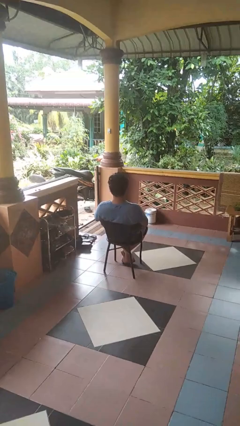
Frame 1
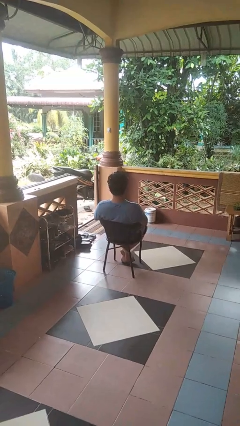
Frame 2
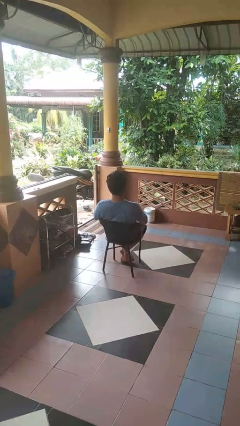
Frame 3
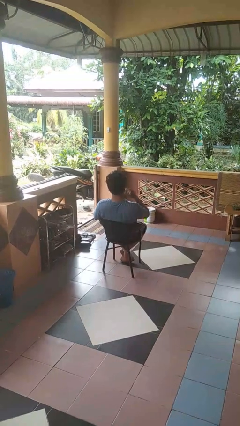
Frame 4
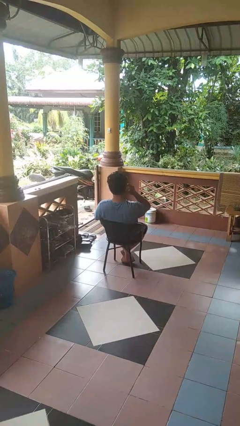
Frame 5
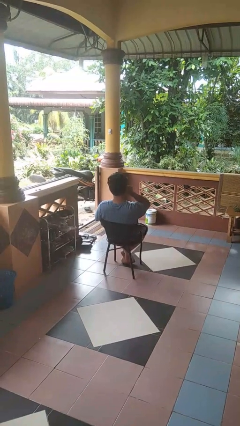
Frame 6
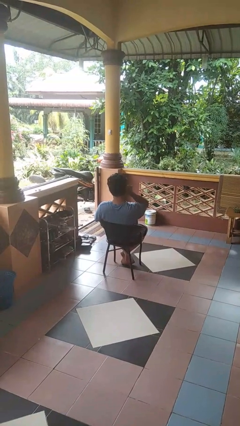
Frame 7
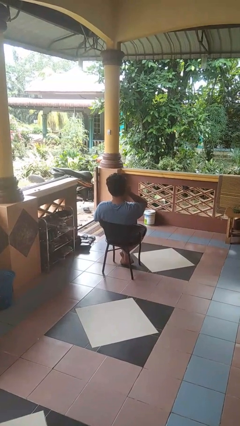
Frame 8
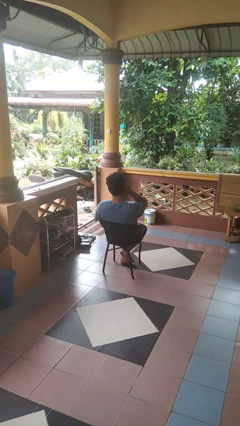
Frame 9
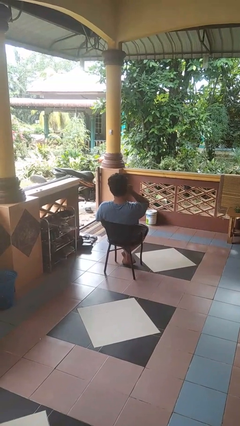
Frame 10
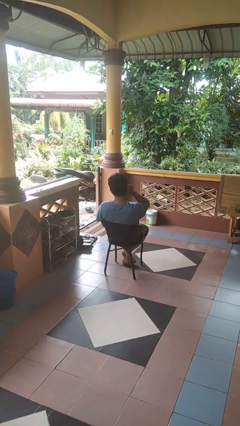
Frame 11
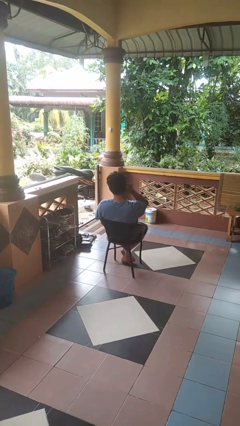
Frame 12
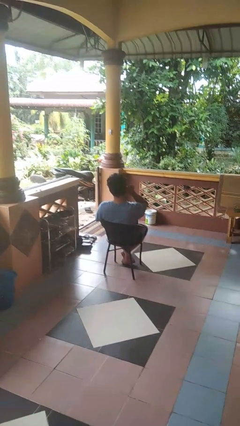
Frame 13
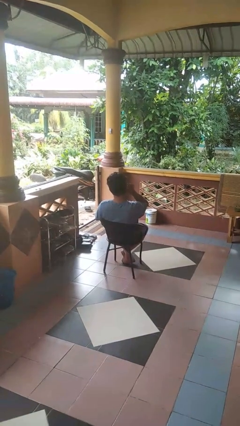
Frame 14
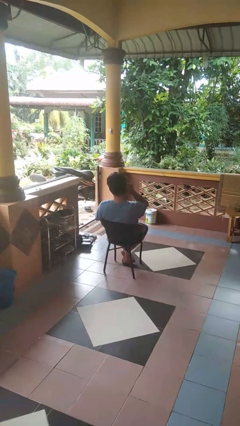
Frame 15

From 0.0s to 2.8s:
person touches earlobe

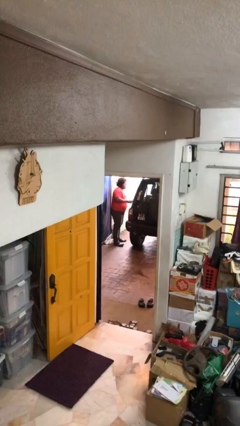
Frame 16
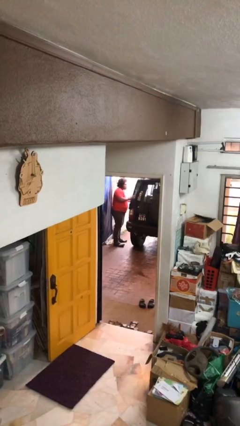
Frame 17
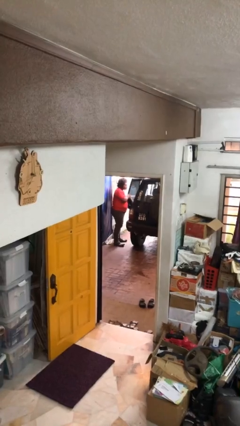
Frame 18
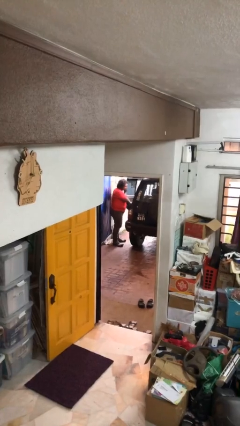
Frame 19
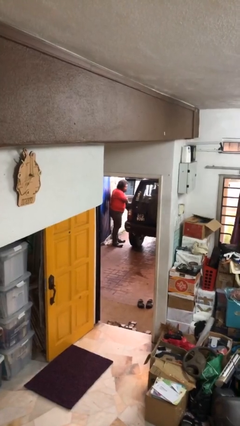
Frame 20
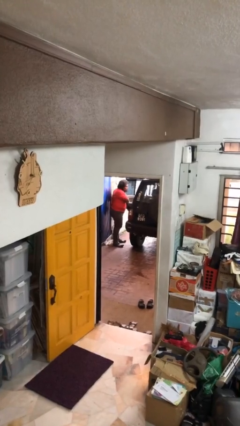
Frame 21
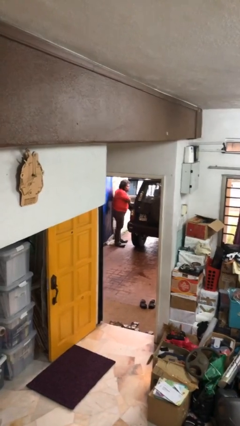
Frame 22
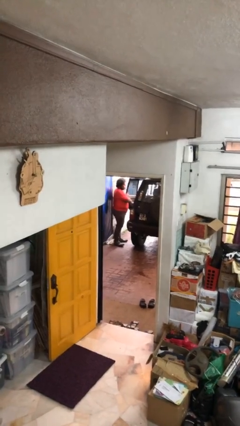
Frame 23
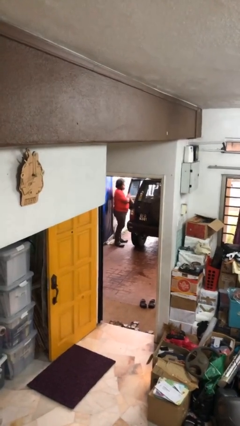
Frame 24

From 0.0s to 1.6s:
person opens car door

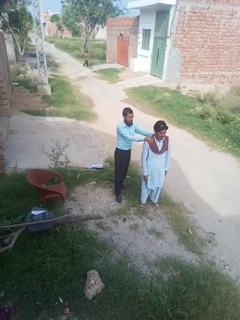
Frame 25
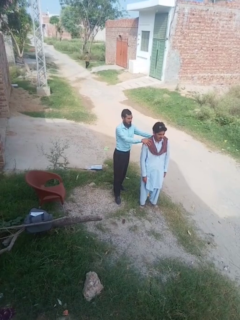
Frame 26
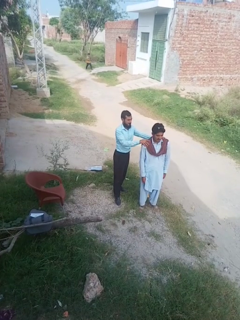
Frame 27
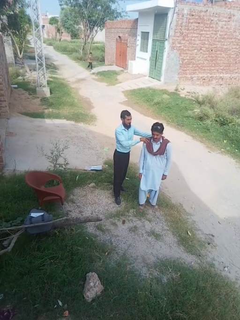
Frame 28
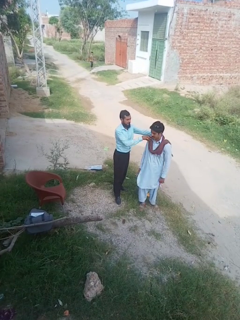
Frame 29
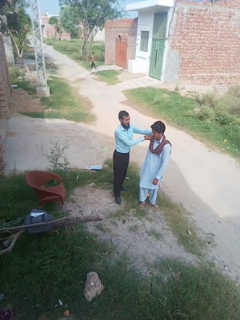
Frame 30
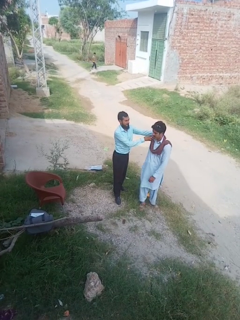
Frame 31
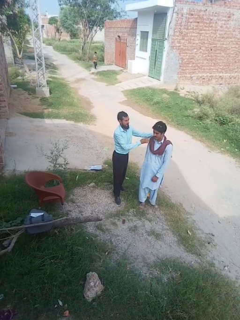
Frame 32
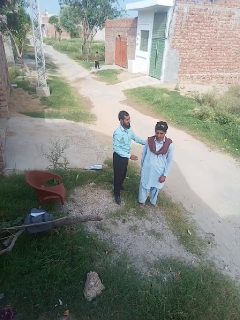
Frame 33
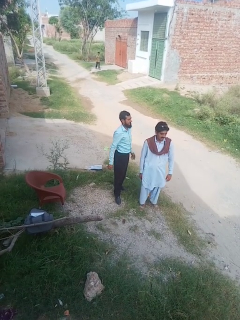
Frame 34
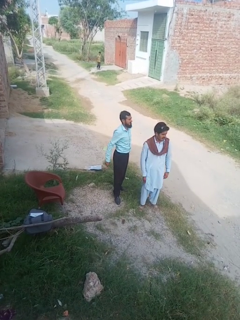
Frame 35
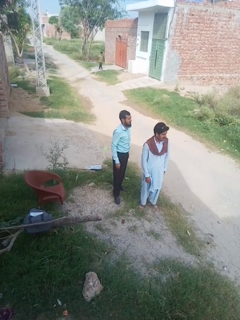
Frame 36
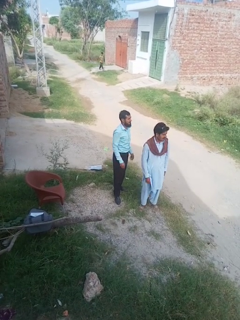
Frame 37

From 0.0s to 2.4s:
person spins person around

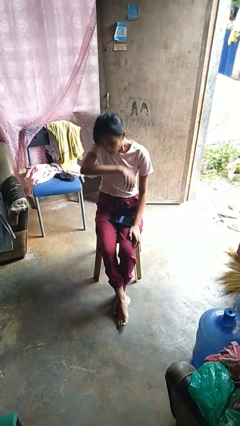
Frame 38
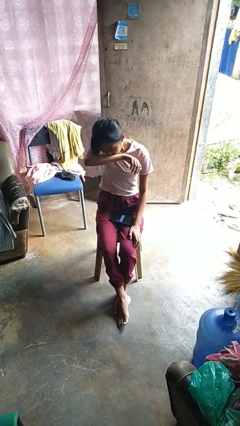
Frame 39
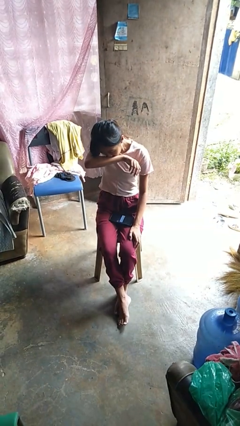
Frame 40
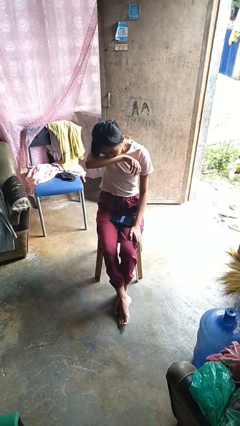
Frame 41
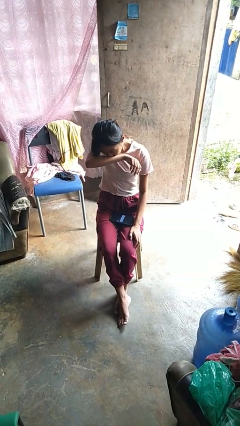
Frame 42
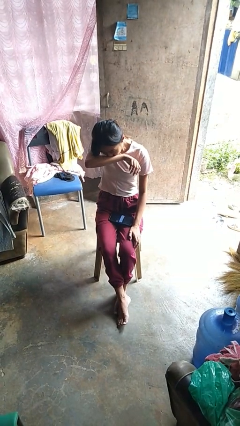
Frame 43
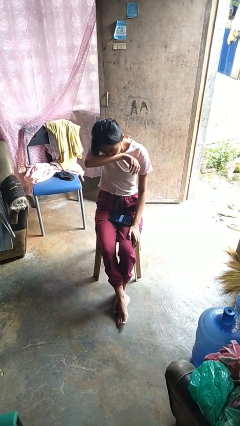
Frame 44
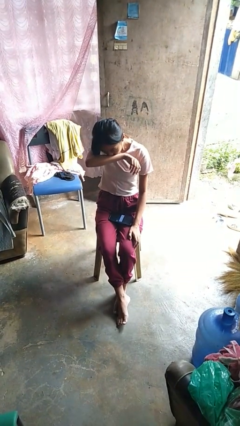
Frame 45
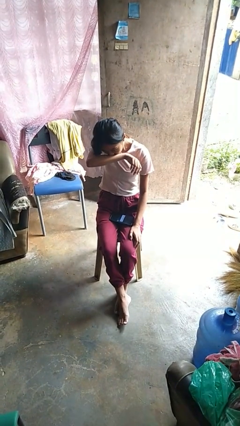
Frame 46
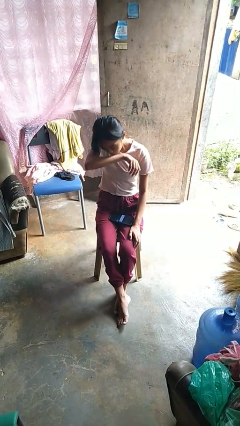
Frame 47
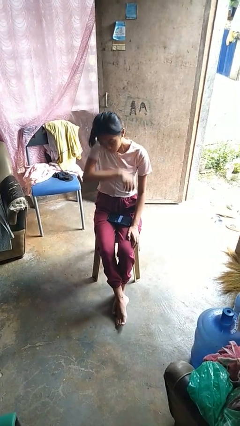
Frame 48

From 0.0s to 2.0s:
person sneezes into arm

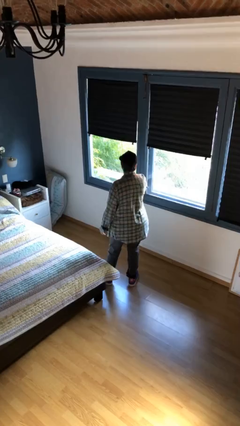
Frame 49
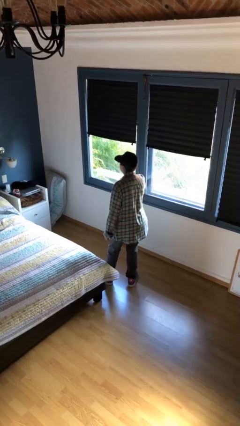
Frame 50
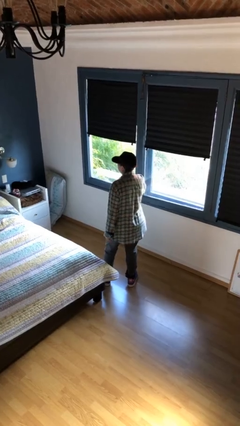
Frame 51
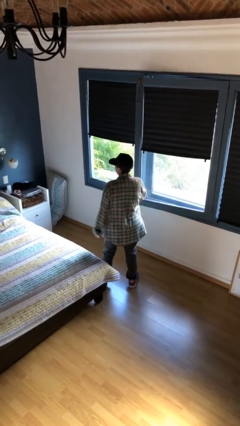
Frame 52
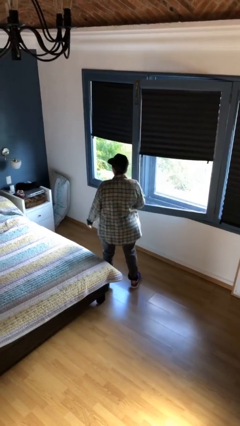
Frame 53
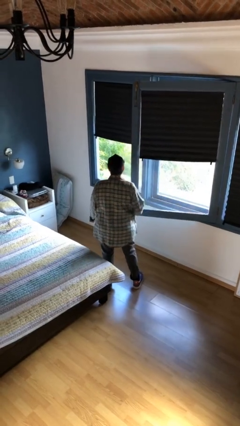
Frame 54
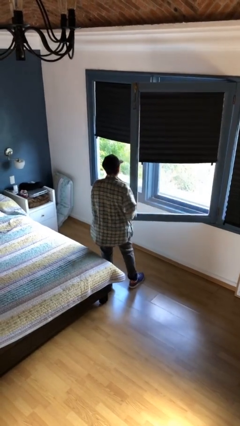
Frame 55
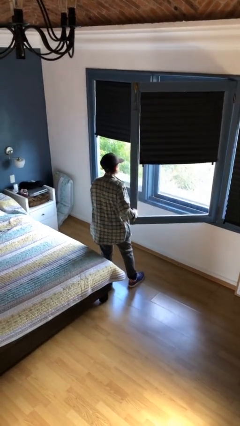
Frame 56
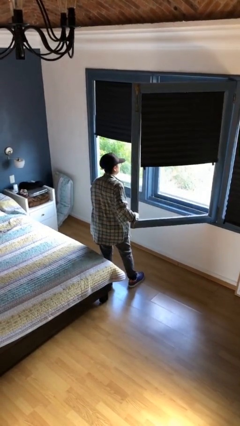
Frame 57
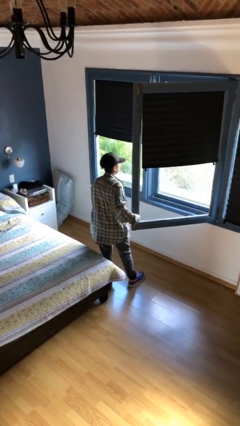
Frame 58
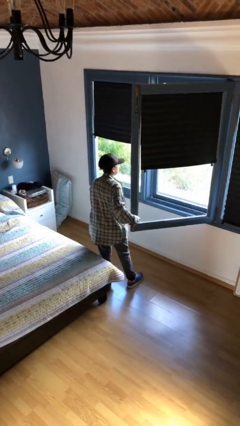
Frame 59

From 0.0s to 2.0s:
person opens home window

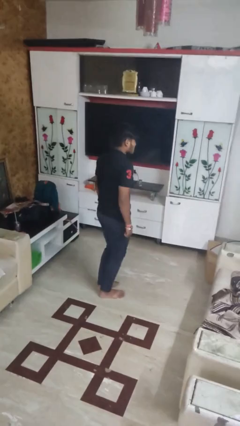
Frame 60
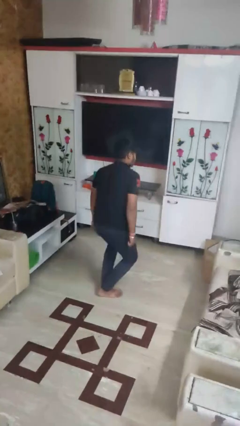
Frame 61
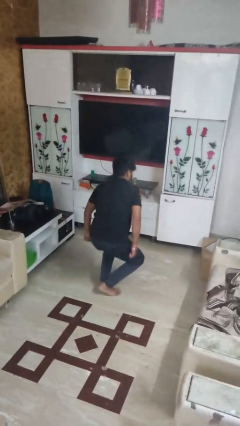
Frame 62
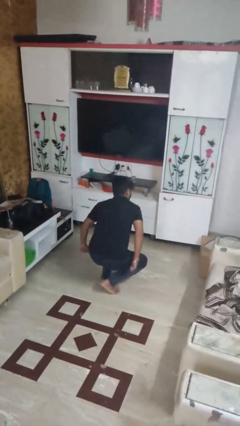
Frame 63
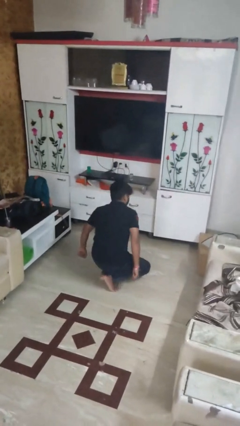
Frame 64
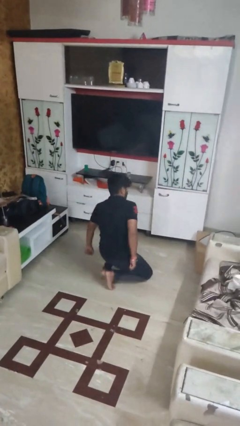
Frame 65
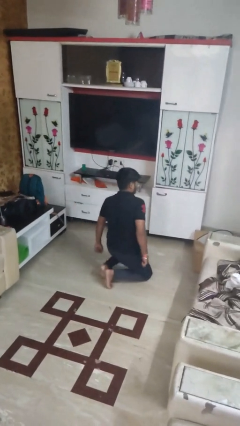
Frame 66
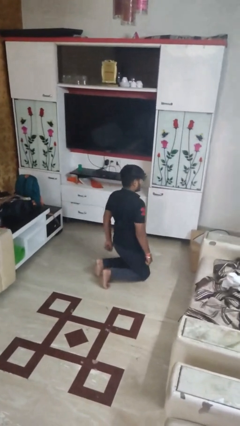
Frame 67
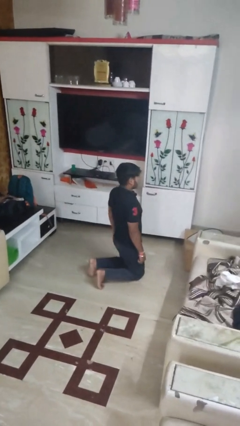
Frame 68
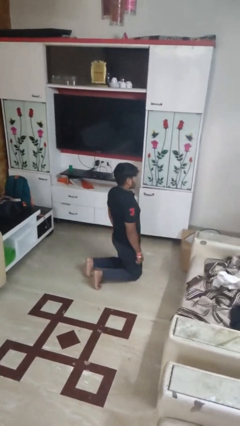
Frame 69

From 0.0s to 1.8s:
person kneels

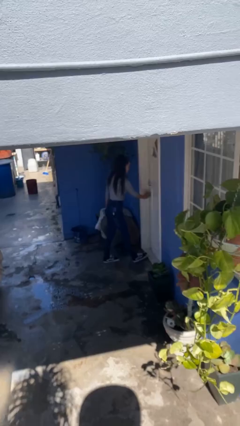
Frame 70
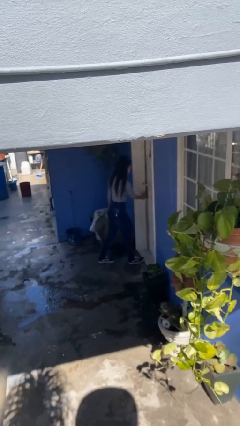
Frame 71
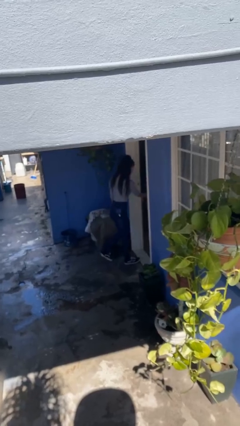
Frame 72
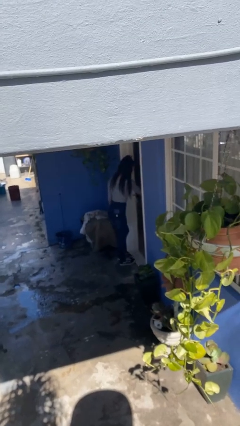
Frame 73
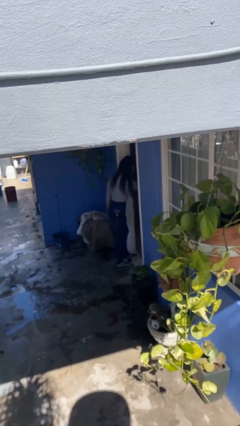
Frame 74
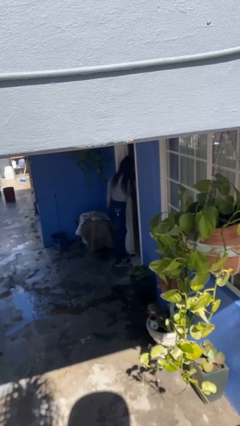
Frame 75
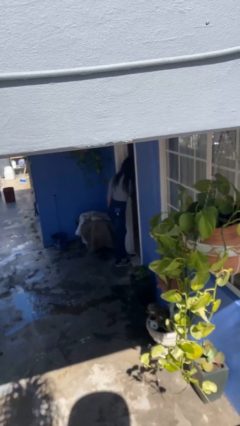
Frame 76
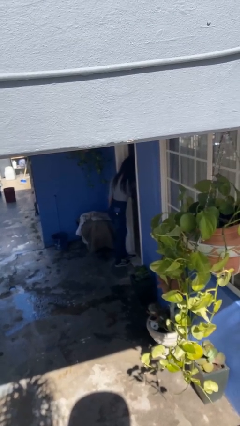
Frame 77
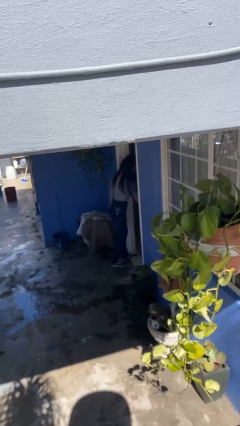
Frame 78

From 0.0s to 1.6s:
person opens facility door

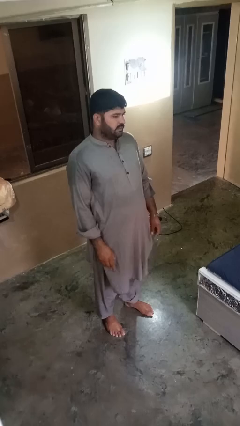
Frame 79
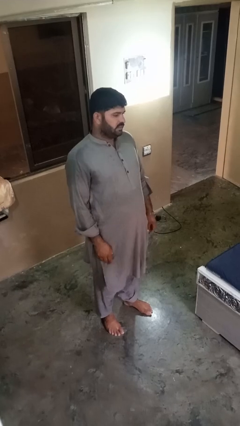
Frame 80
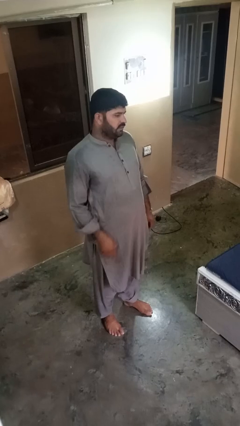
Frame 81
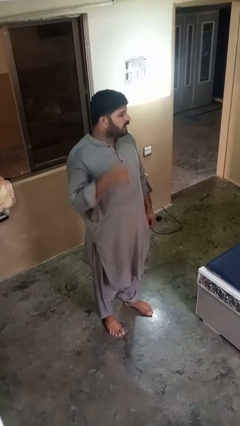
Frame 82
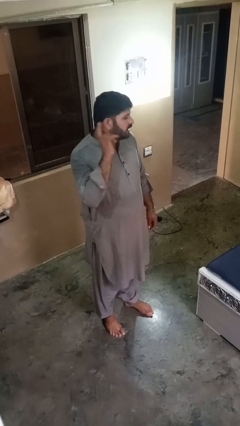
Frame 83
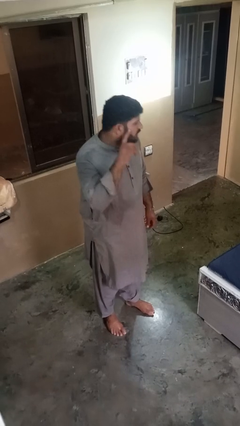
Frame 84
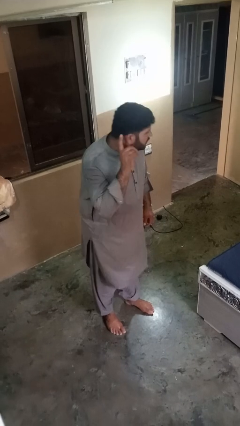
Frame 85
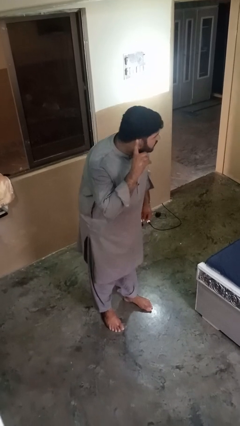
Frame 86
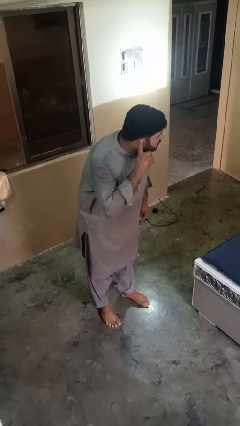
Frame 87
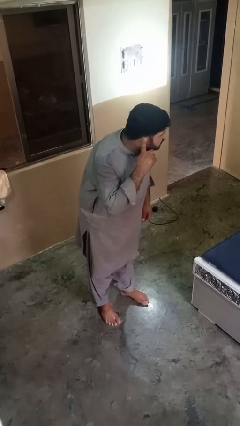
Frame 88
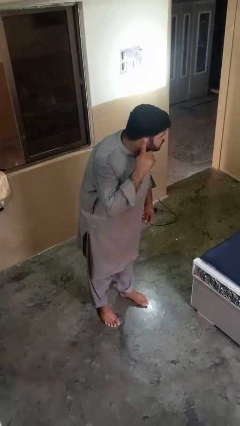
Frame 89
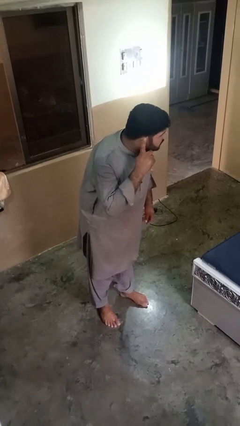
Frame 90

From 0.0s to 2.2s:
person gestures listen closely

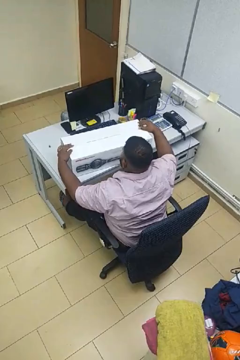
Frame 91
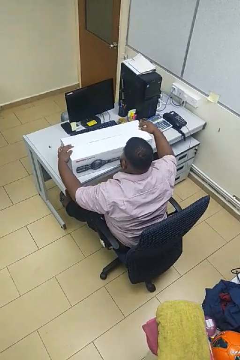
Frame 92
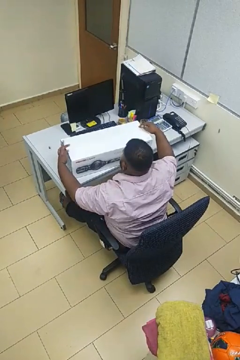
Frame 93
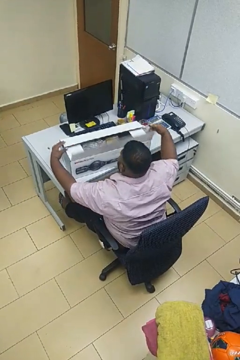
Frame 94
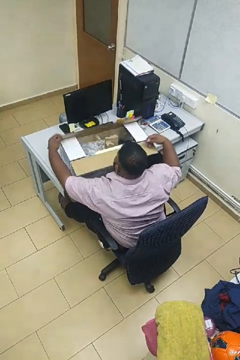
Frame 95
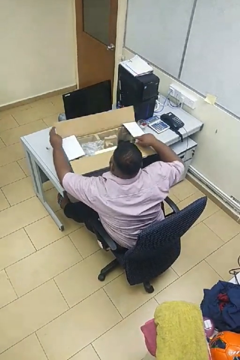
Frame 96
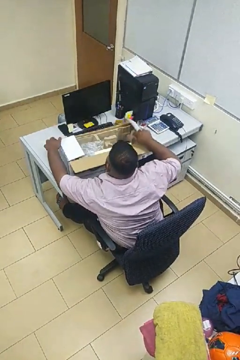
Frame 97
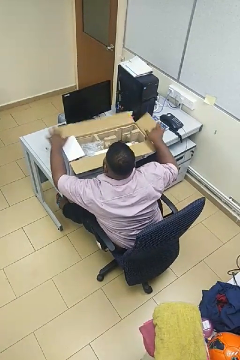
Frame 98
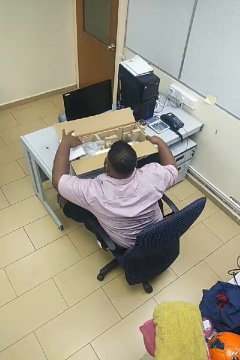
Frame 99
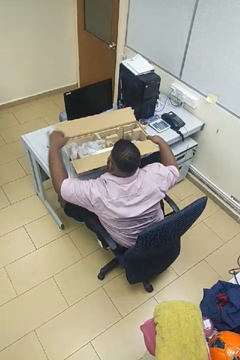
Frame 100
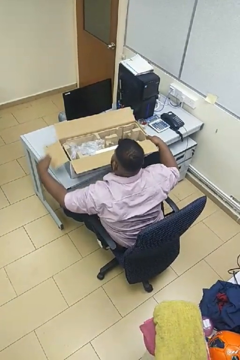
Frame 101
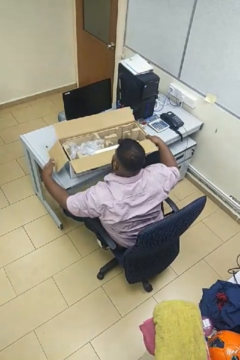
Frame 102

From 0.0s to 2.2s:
person opens box
